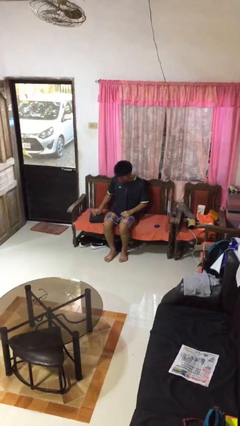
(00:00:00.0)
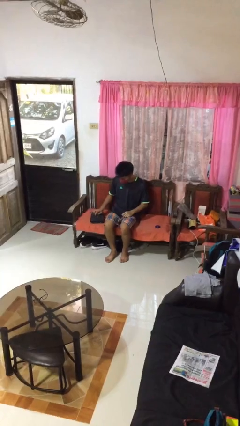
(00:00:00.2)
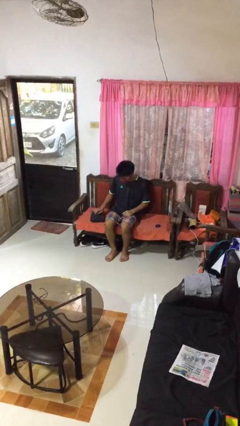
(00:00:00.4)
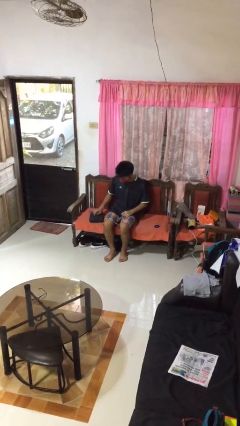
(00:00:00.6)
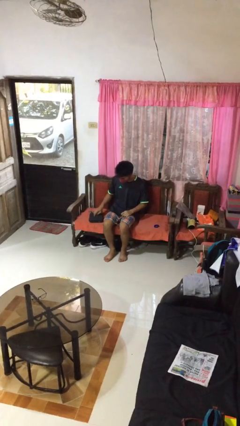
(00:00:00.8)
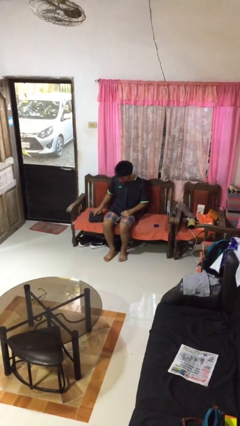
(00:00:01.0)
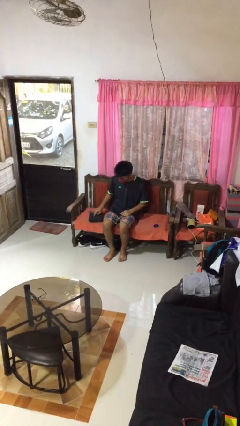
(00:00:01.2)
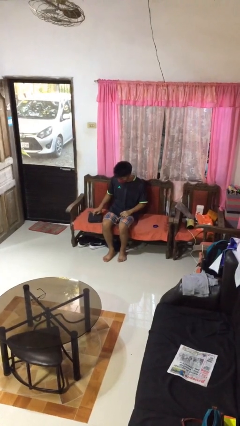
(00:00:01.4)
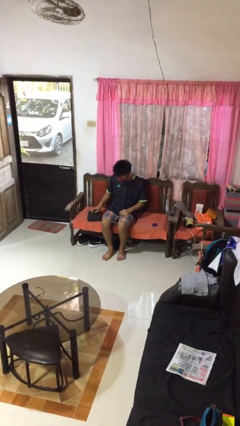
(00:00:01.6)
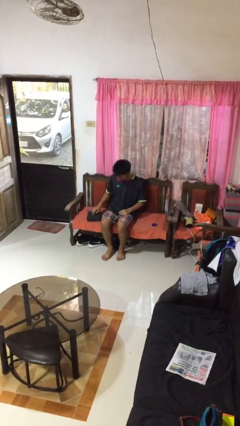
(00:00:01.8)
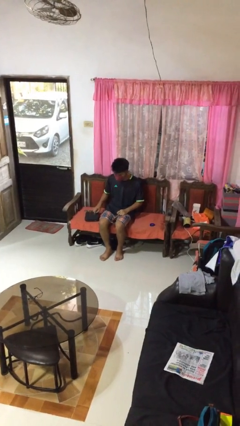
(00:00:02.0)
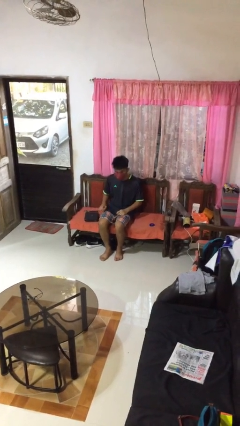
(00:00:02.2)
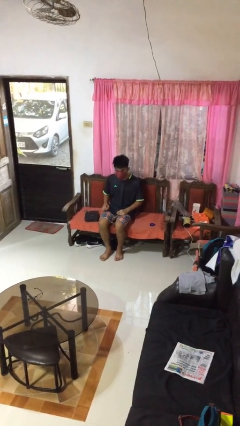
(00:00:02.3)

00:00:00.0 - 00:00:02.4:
person taps object with finger

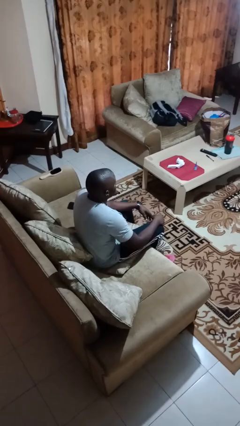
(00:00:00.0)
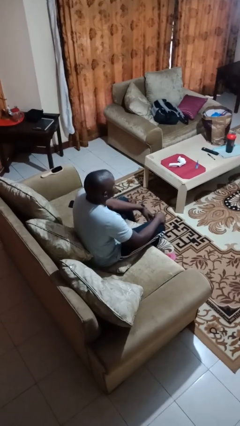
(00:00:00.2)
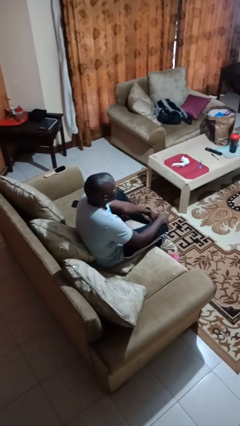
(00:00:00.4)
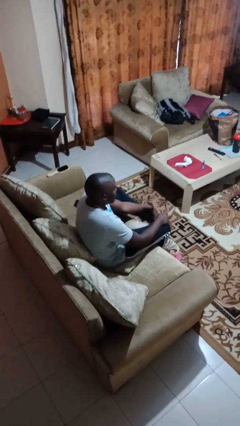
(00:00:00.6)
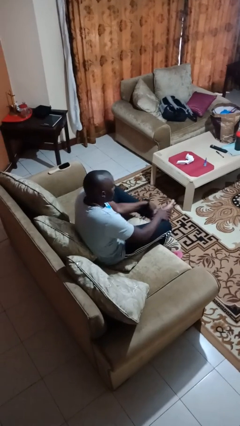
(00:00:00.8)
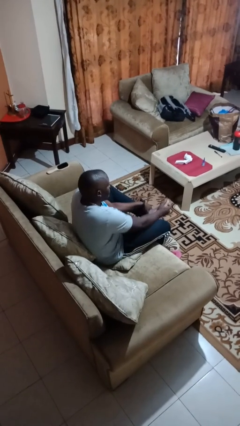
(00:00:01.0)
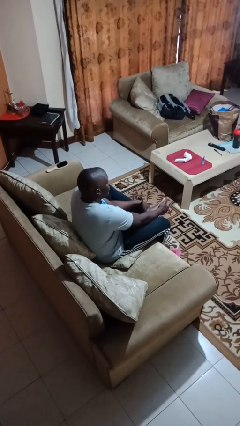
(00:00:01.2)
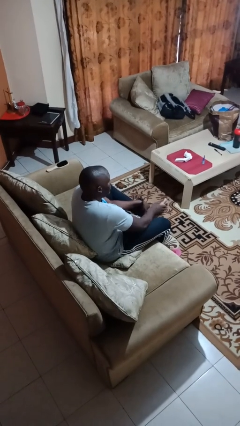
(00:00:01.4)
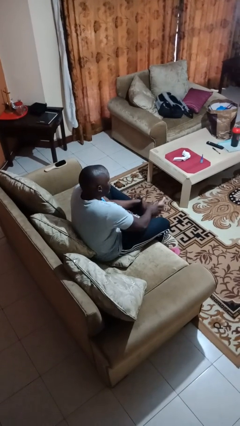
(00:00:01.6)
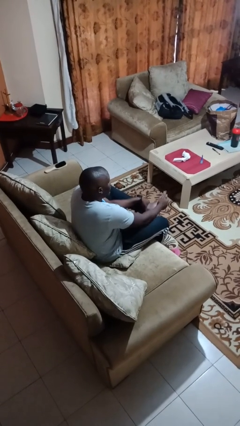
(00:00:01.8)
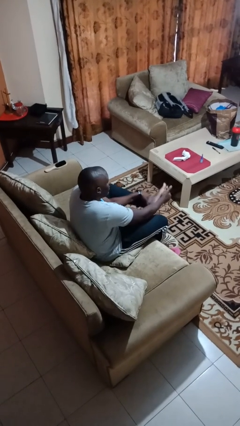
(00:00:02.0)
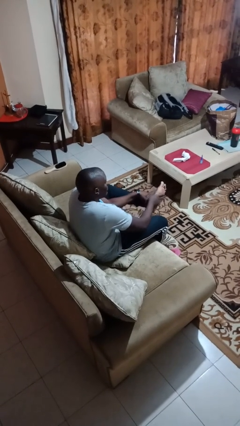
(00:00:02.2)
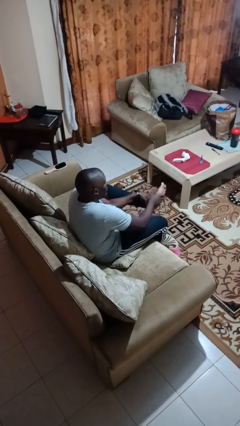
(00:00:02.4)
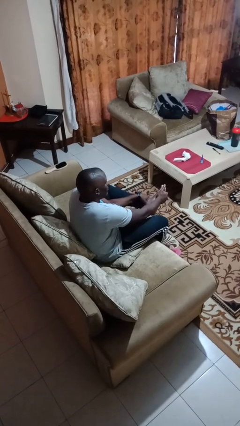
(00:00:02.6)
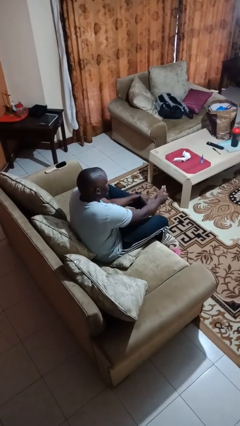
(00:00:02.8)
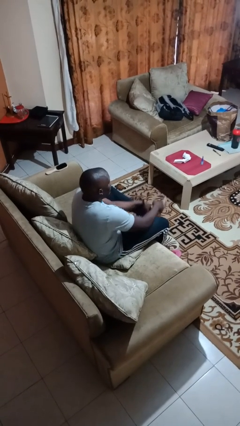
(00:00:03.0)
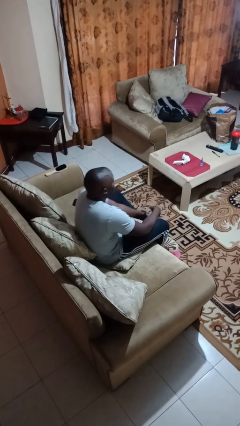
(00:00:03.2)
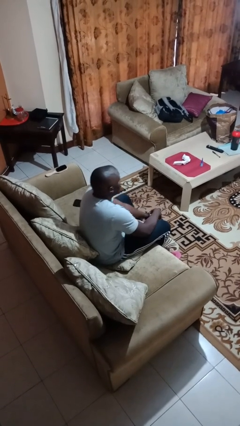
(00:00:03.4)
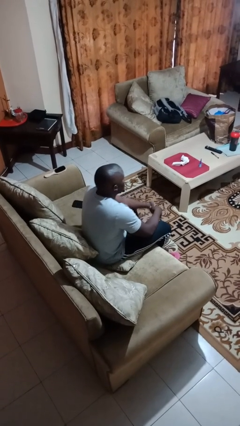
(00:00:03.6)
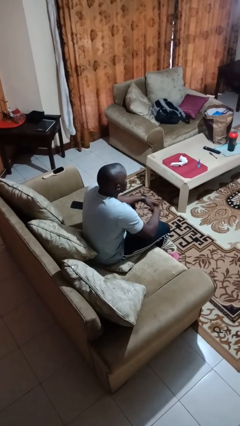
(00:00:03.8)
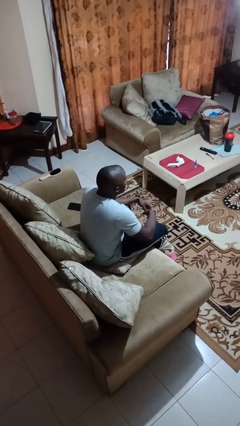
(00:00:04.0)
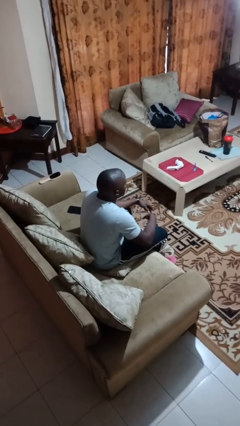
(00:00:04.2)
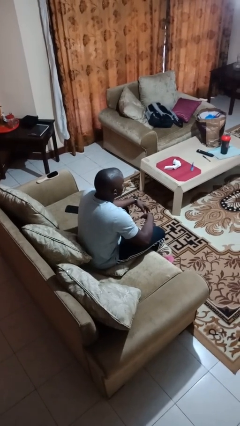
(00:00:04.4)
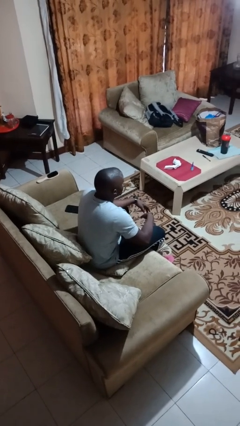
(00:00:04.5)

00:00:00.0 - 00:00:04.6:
person rubs foot

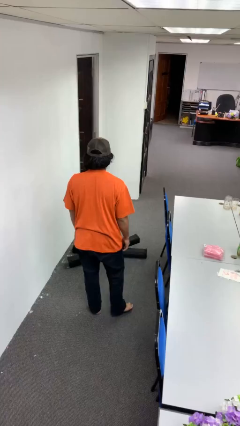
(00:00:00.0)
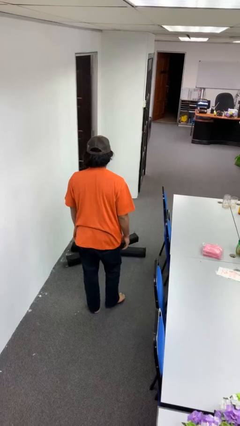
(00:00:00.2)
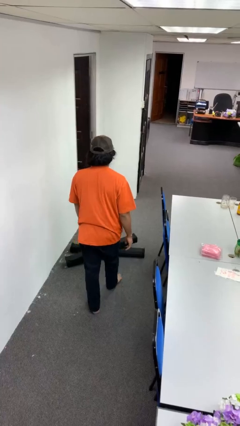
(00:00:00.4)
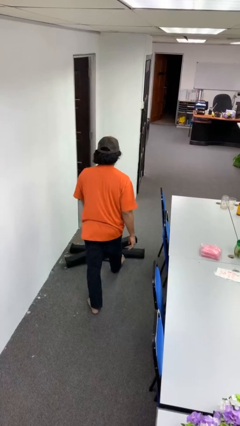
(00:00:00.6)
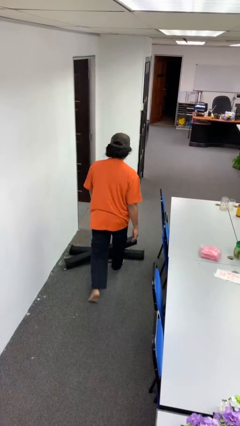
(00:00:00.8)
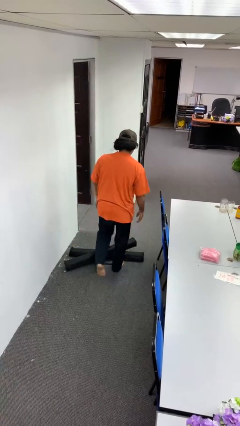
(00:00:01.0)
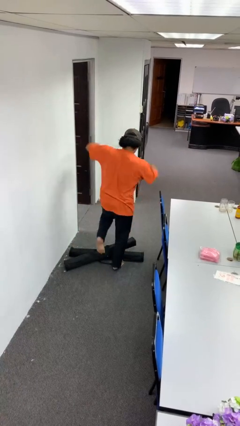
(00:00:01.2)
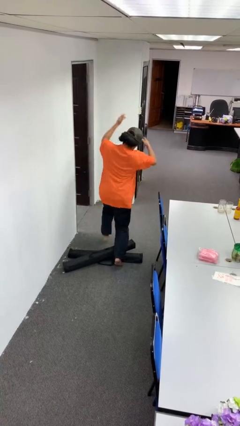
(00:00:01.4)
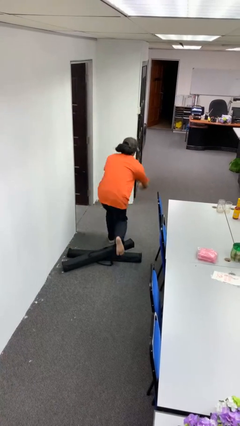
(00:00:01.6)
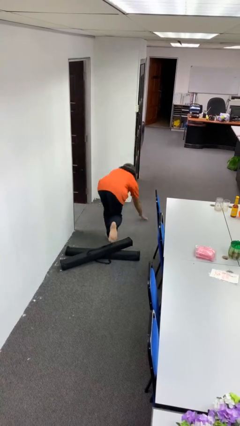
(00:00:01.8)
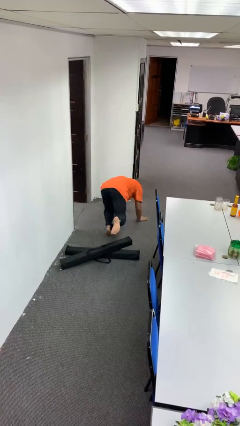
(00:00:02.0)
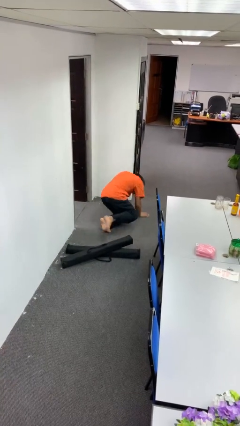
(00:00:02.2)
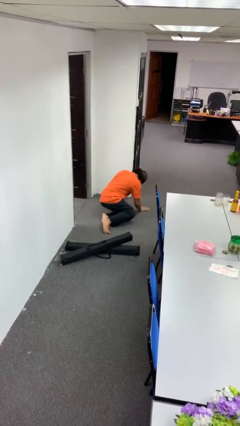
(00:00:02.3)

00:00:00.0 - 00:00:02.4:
person trips on object on floor

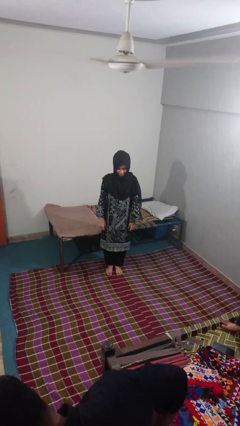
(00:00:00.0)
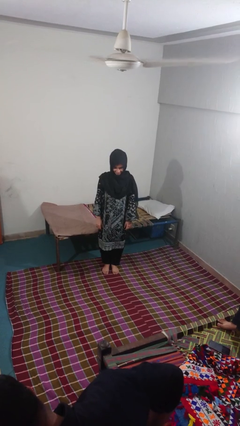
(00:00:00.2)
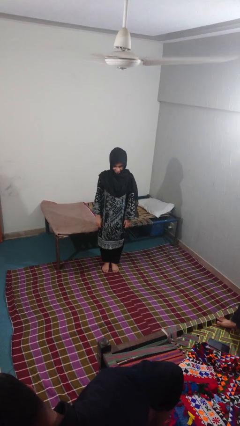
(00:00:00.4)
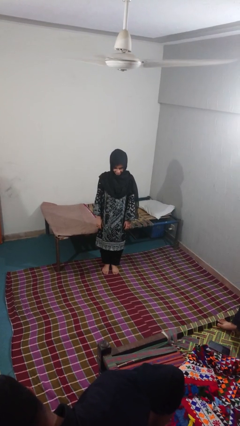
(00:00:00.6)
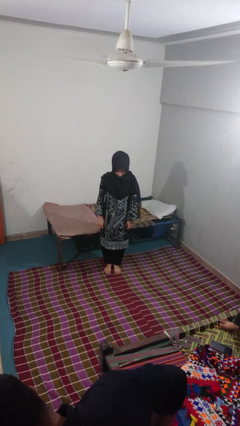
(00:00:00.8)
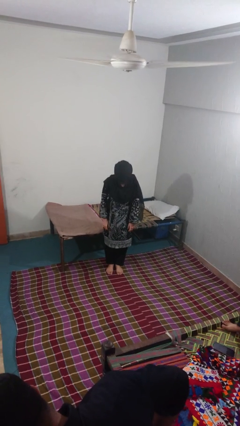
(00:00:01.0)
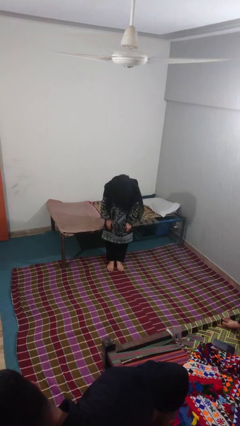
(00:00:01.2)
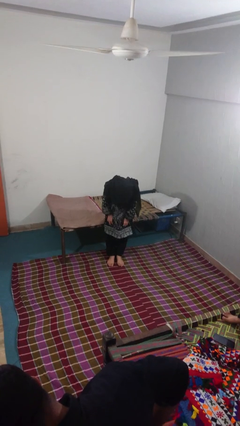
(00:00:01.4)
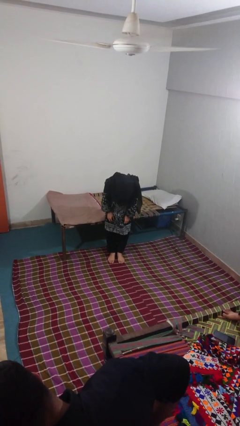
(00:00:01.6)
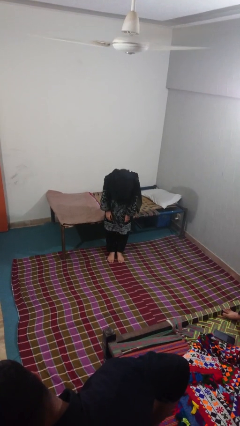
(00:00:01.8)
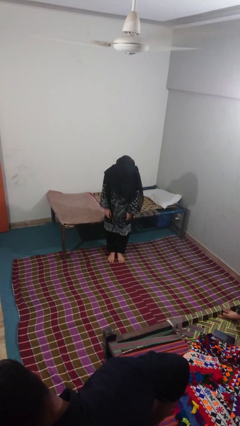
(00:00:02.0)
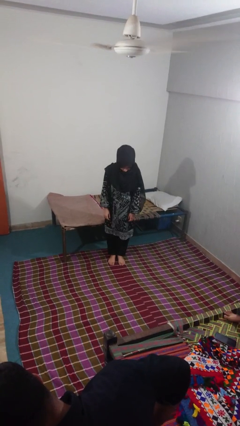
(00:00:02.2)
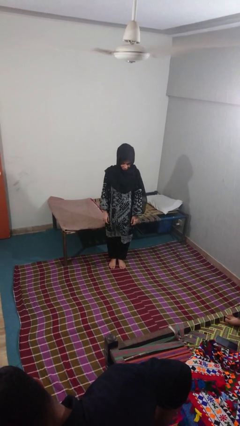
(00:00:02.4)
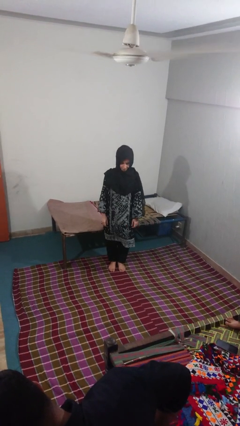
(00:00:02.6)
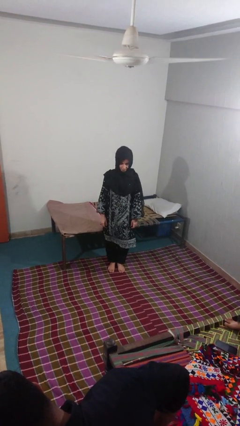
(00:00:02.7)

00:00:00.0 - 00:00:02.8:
person bows

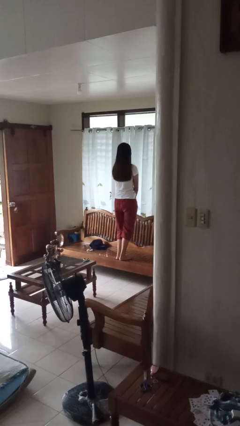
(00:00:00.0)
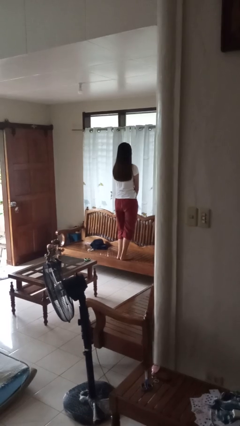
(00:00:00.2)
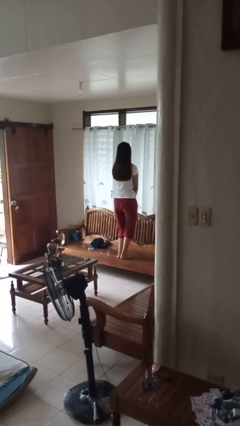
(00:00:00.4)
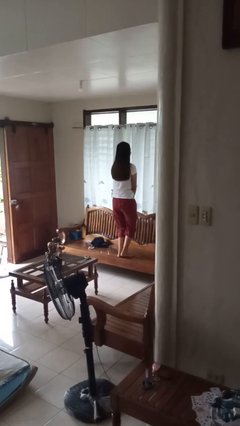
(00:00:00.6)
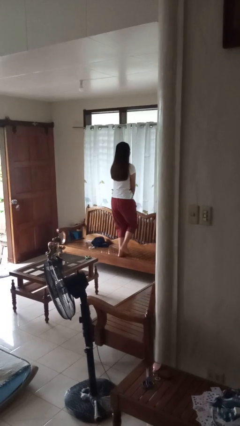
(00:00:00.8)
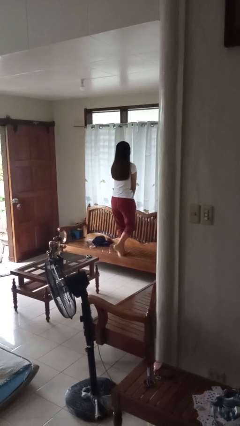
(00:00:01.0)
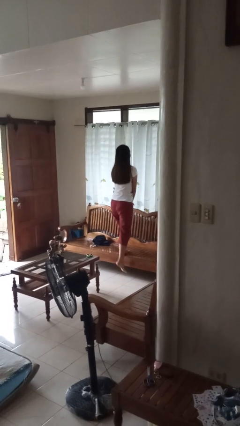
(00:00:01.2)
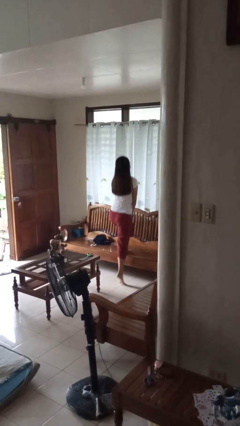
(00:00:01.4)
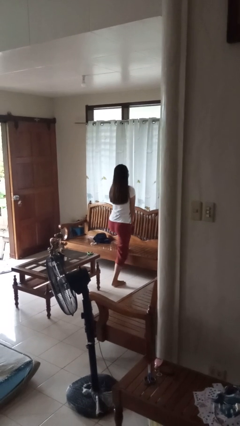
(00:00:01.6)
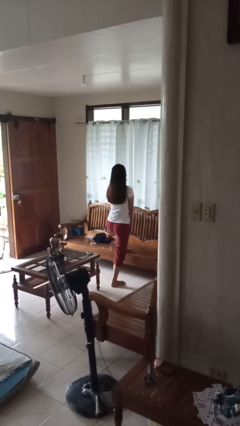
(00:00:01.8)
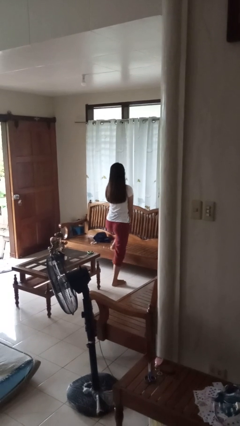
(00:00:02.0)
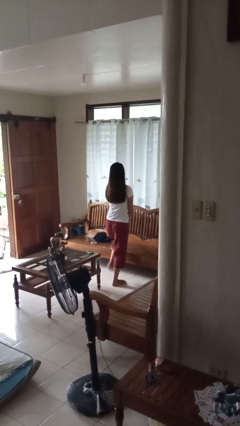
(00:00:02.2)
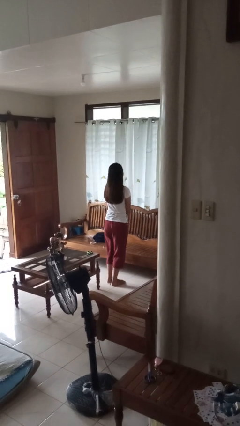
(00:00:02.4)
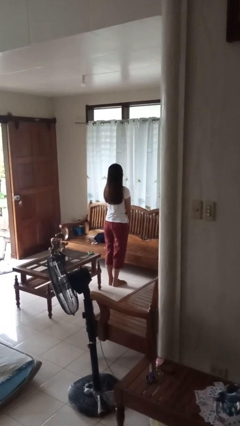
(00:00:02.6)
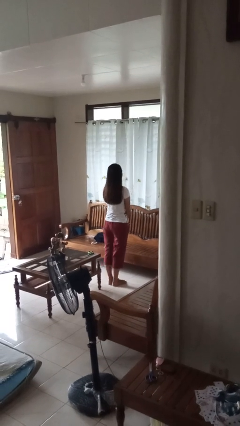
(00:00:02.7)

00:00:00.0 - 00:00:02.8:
person climbs off chair

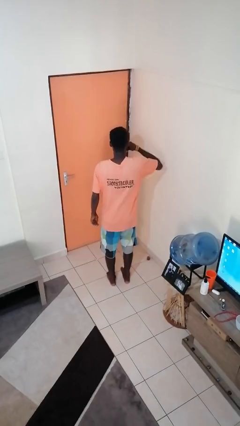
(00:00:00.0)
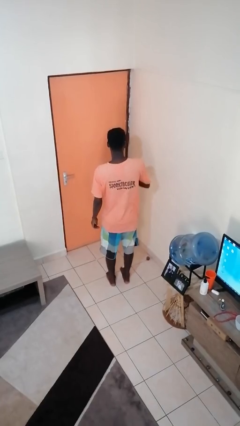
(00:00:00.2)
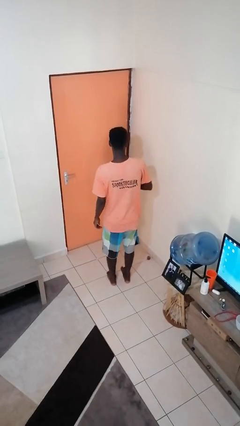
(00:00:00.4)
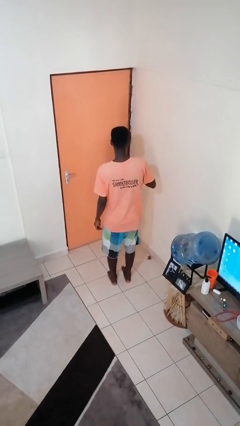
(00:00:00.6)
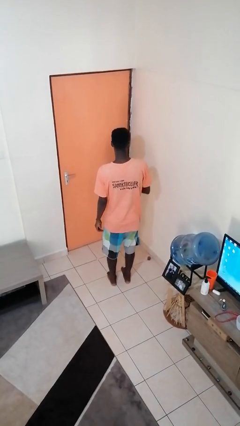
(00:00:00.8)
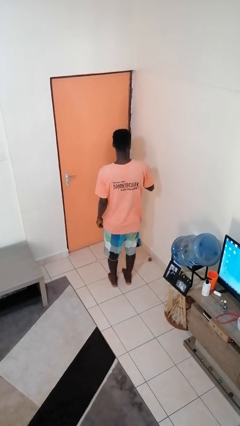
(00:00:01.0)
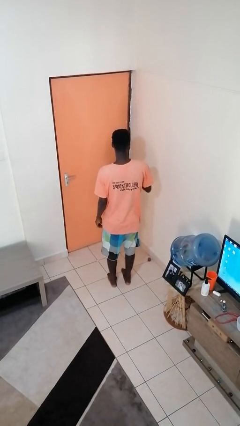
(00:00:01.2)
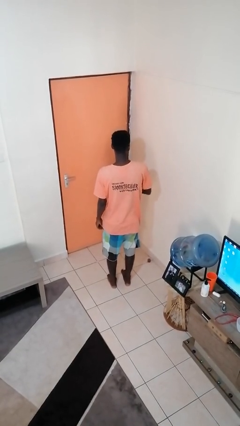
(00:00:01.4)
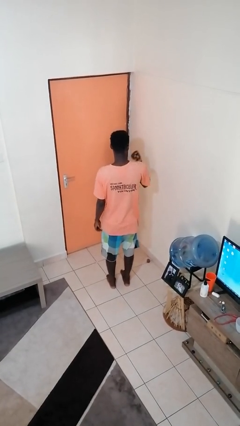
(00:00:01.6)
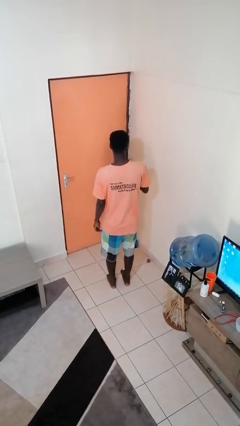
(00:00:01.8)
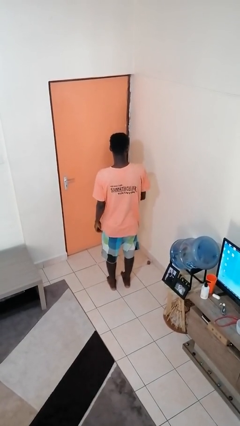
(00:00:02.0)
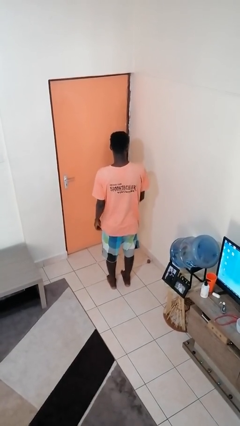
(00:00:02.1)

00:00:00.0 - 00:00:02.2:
person snaps fingers
